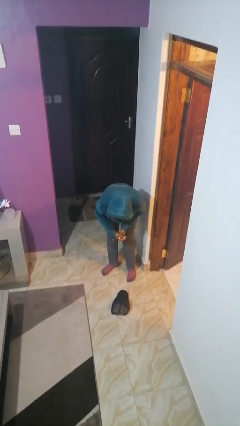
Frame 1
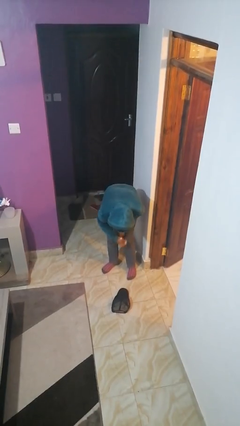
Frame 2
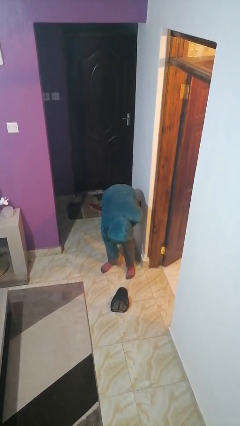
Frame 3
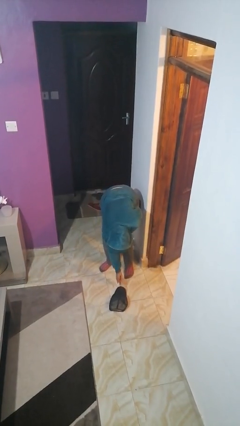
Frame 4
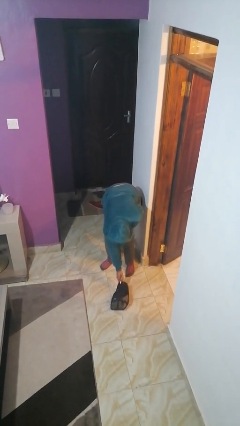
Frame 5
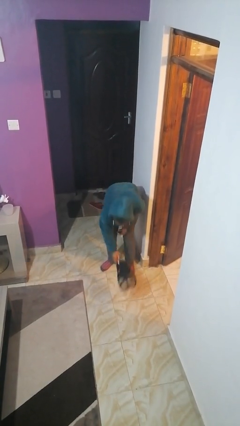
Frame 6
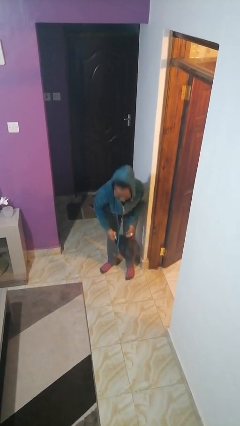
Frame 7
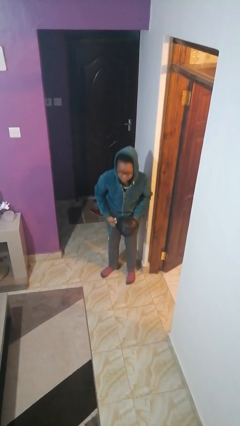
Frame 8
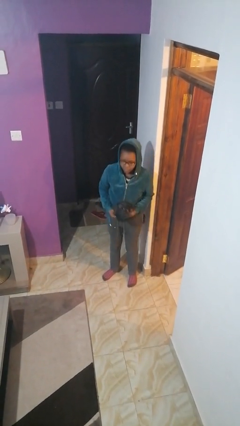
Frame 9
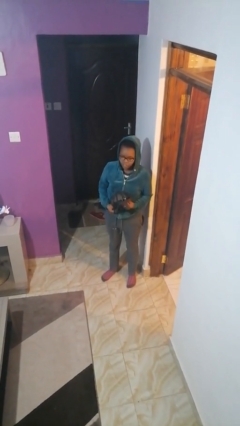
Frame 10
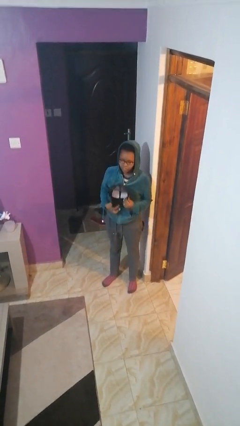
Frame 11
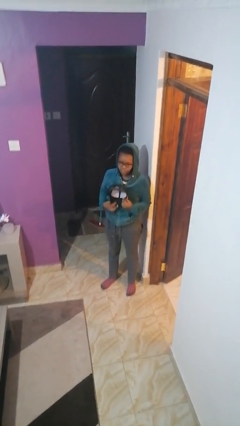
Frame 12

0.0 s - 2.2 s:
person picks up object from floor

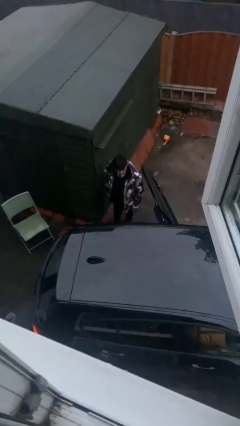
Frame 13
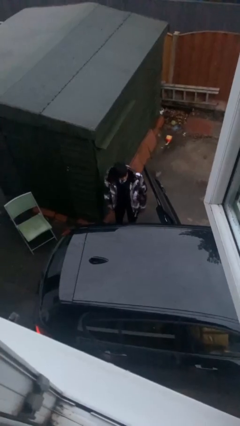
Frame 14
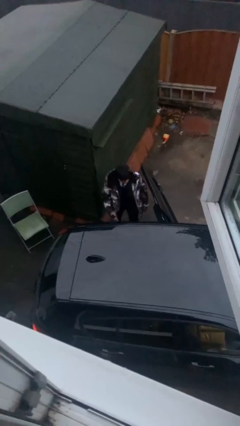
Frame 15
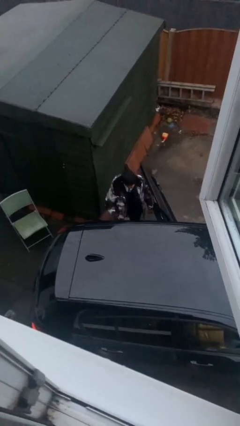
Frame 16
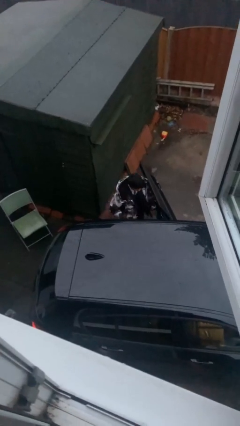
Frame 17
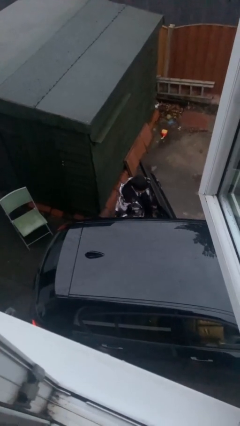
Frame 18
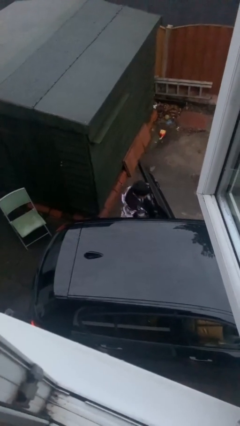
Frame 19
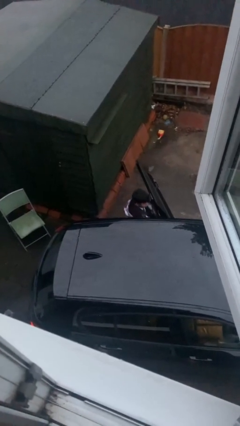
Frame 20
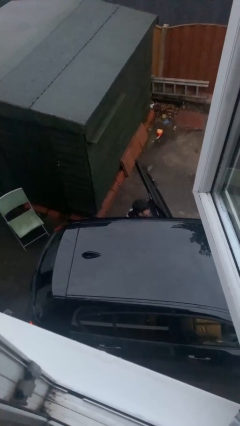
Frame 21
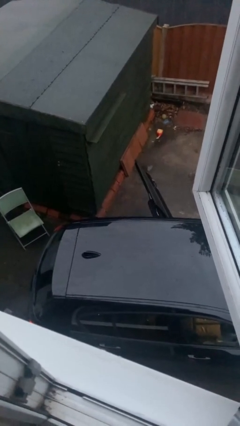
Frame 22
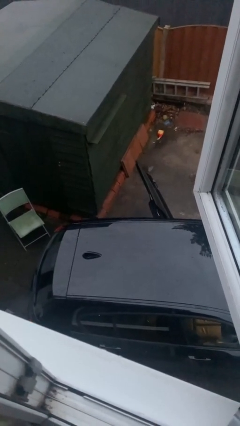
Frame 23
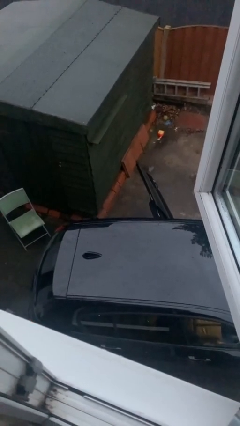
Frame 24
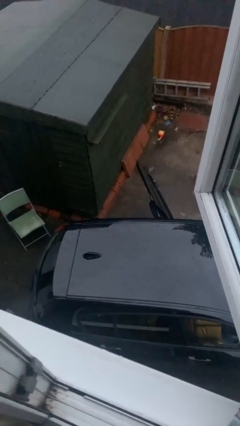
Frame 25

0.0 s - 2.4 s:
person enters car

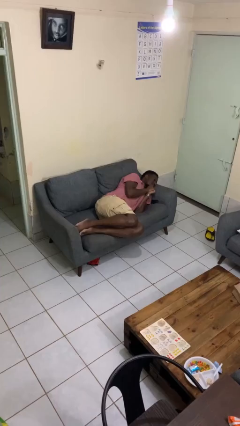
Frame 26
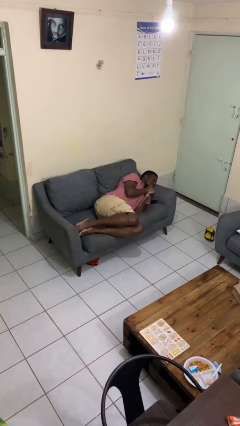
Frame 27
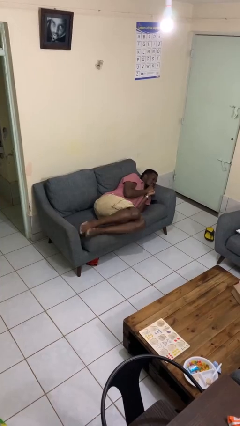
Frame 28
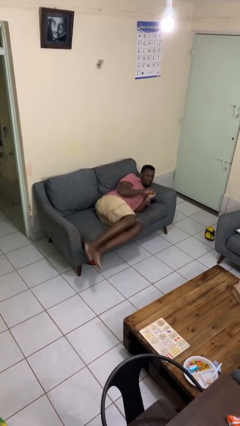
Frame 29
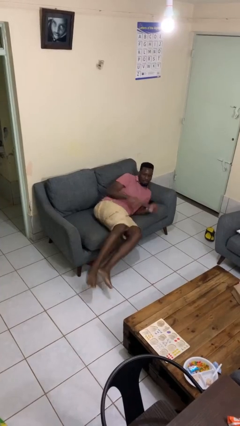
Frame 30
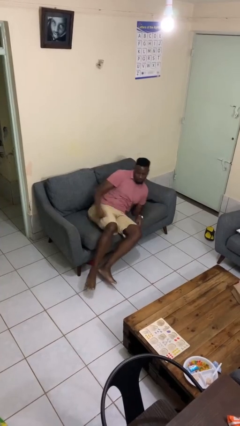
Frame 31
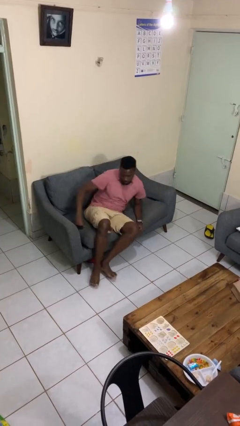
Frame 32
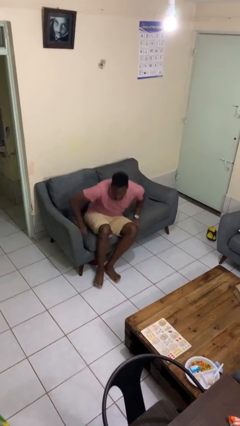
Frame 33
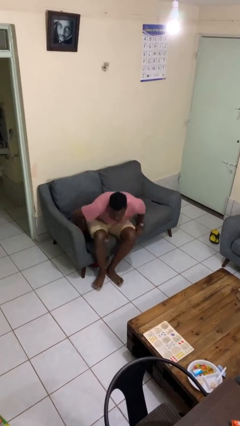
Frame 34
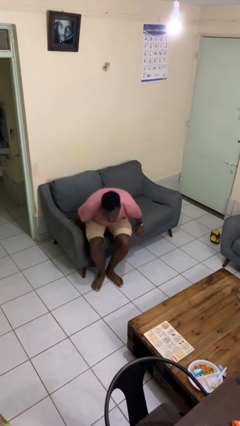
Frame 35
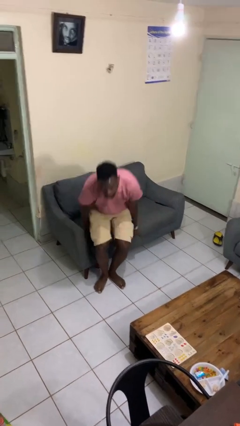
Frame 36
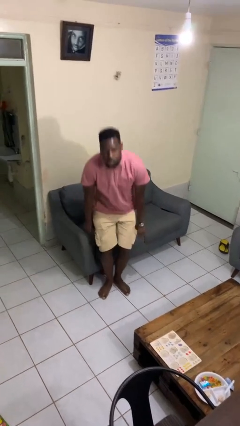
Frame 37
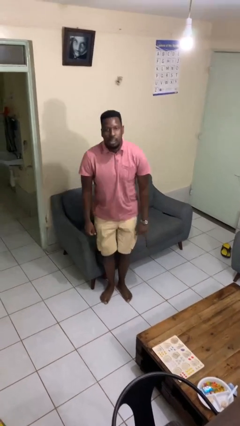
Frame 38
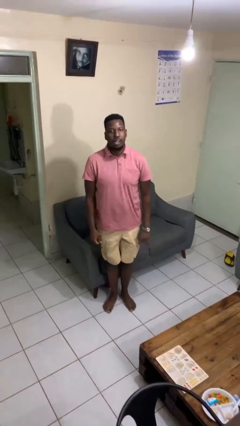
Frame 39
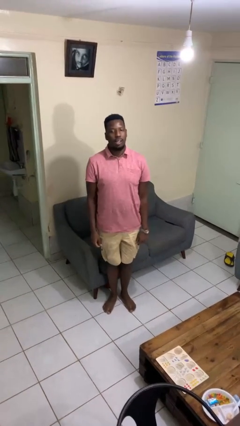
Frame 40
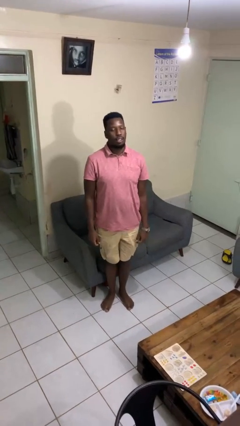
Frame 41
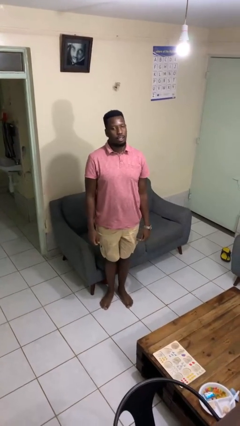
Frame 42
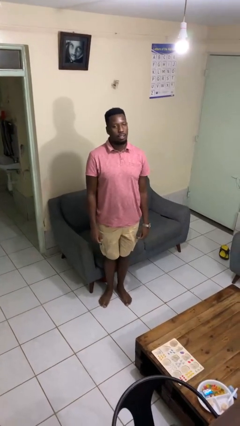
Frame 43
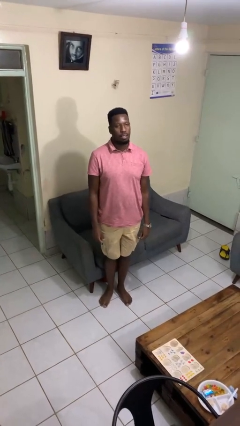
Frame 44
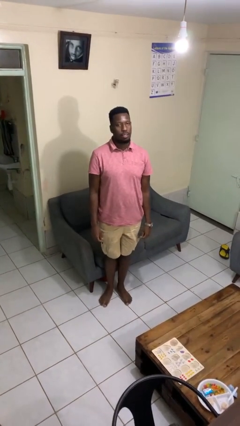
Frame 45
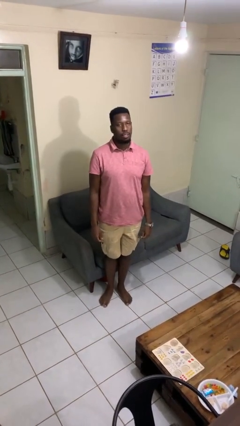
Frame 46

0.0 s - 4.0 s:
person stands up

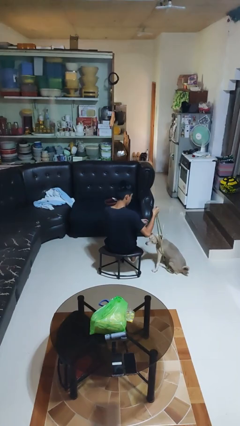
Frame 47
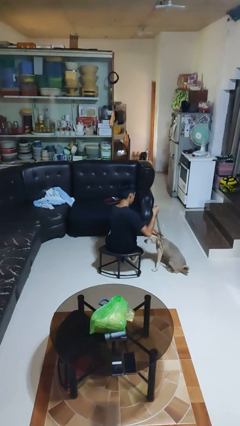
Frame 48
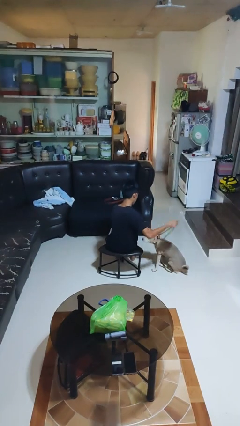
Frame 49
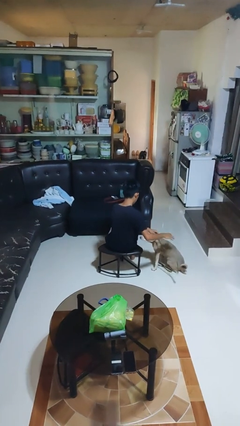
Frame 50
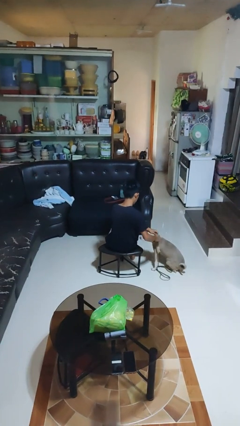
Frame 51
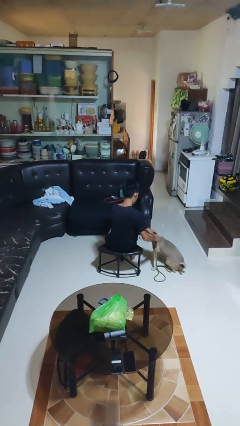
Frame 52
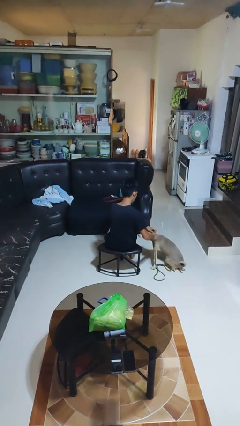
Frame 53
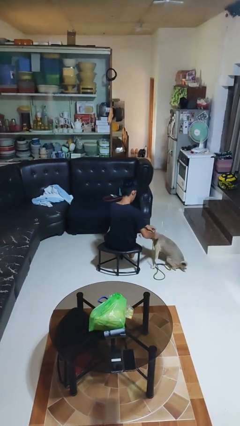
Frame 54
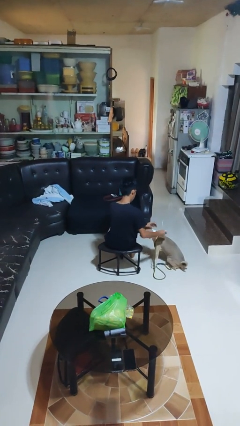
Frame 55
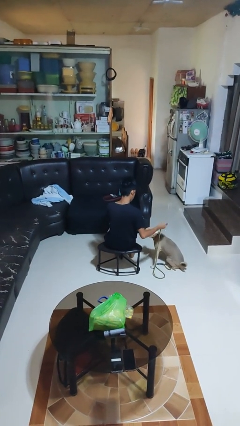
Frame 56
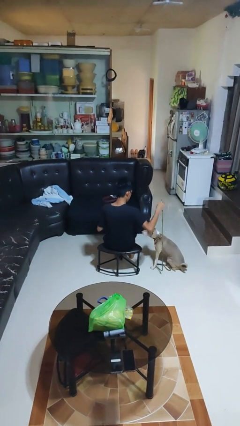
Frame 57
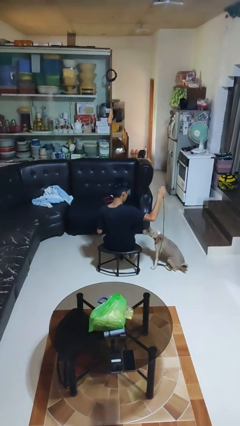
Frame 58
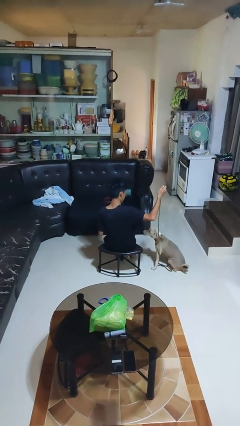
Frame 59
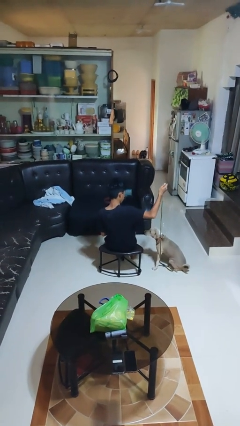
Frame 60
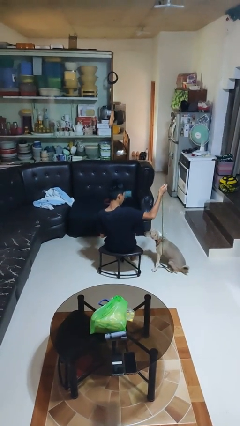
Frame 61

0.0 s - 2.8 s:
person unattaches leash from dog

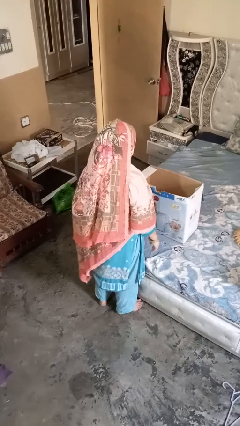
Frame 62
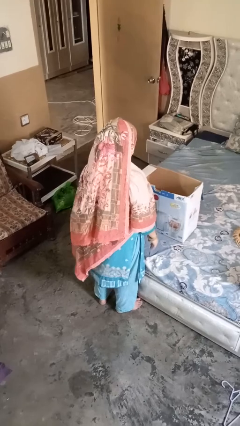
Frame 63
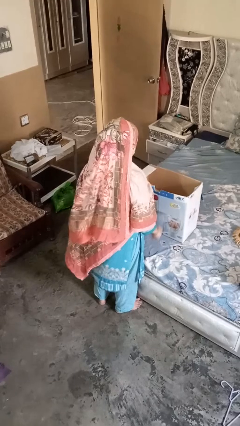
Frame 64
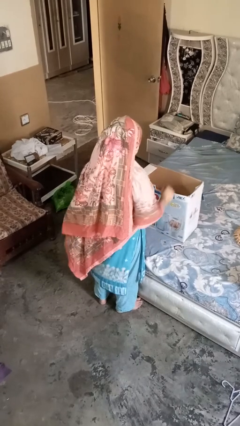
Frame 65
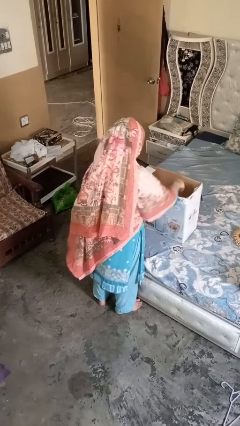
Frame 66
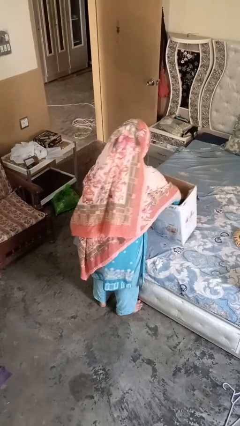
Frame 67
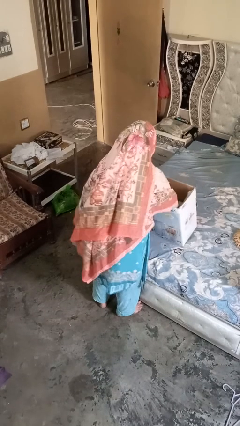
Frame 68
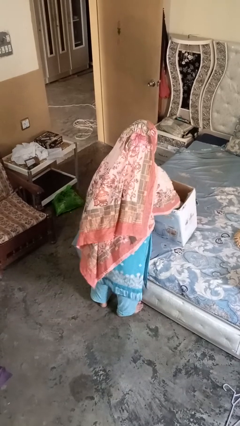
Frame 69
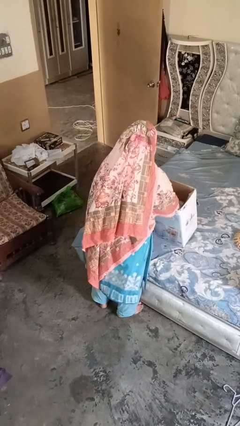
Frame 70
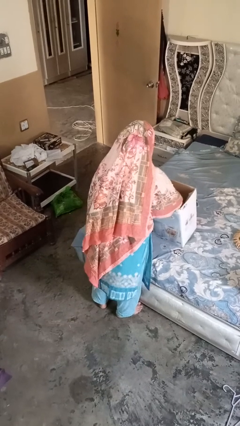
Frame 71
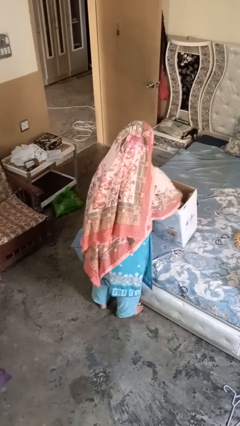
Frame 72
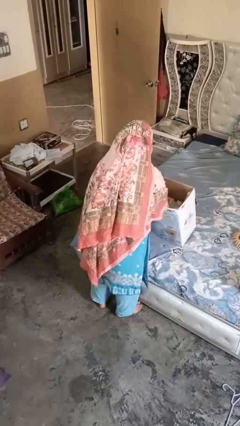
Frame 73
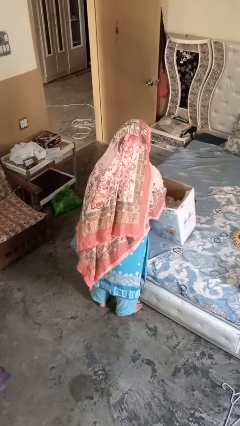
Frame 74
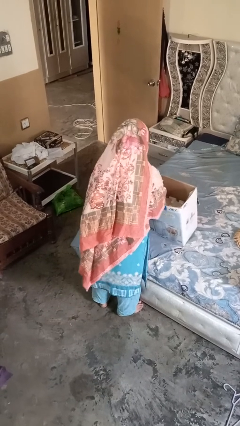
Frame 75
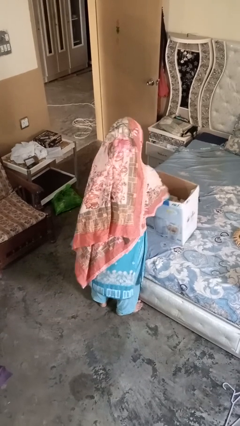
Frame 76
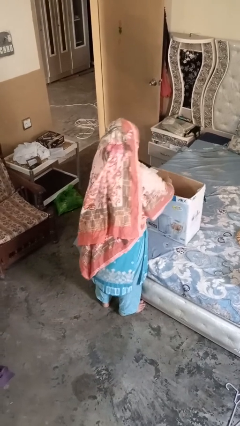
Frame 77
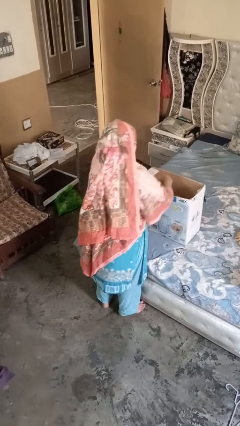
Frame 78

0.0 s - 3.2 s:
person searches in box

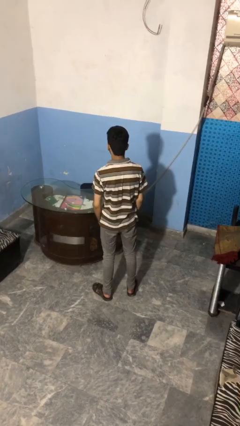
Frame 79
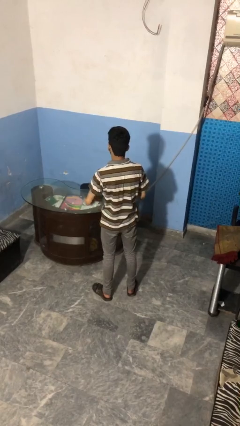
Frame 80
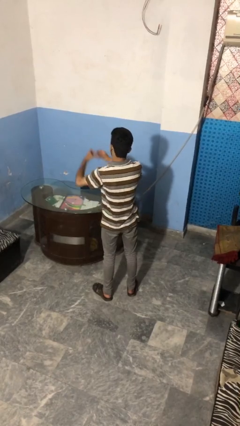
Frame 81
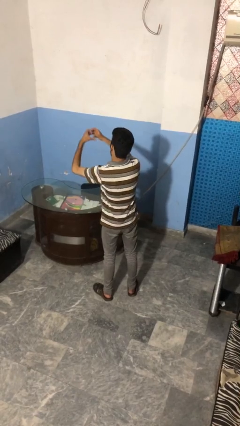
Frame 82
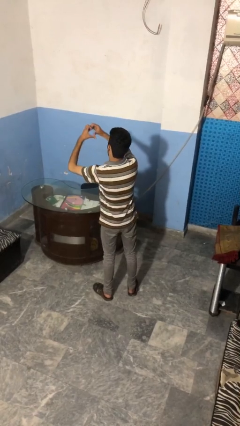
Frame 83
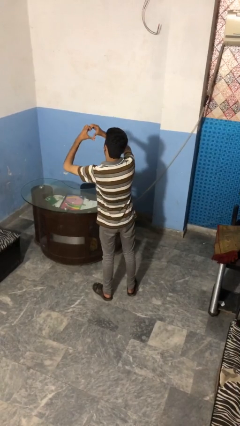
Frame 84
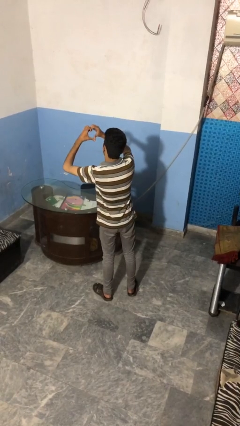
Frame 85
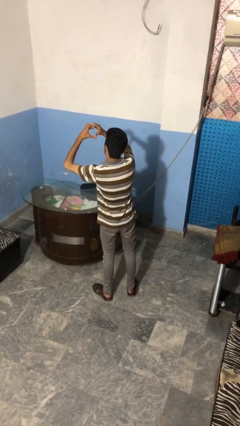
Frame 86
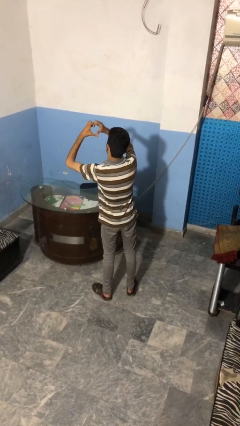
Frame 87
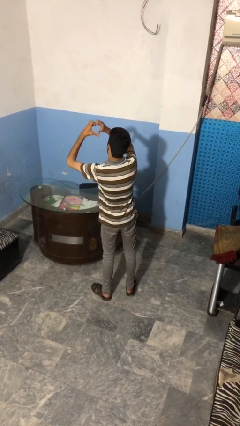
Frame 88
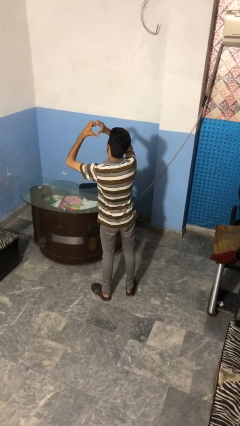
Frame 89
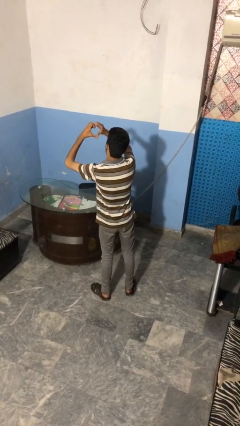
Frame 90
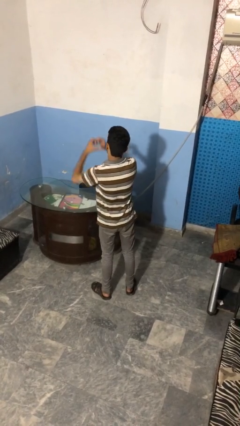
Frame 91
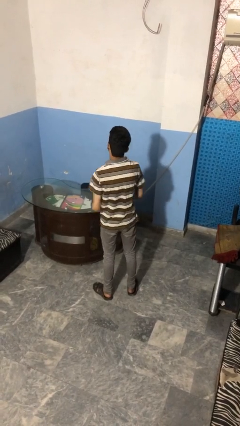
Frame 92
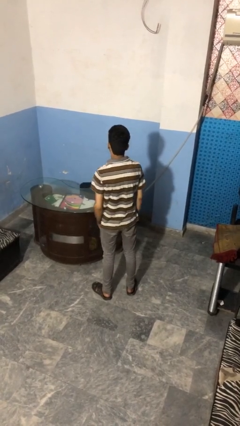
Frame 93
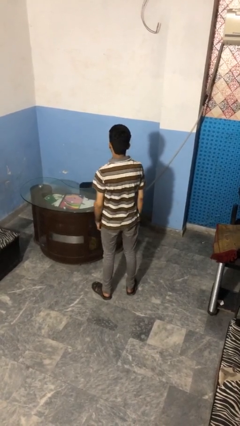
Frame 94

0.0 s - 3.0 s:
person gestures heart
